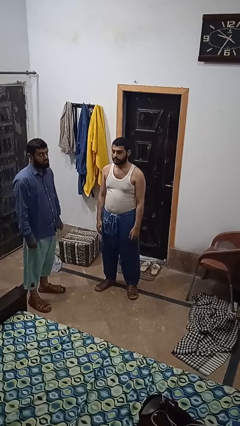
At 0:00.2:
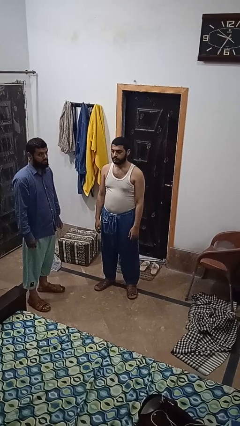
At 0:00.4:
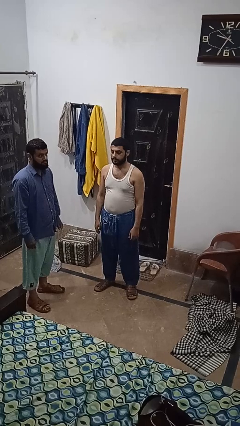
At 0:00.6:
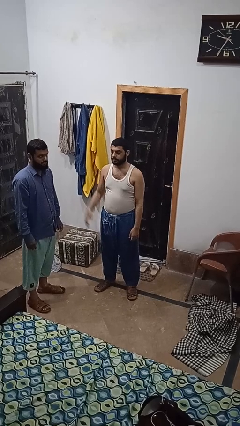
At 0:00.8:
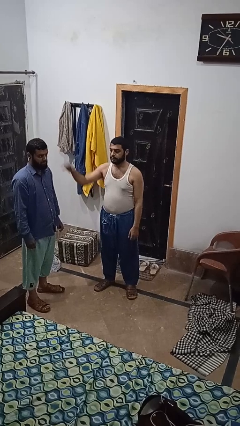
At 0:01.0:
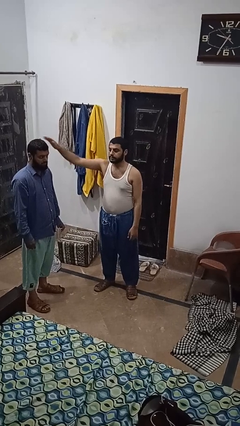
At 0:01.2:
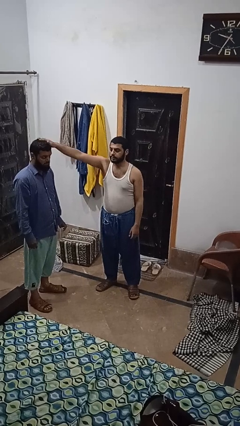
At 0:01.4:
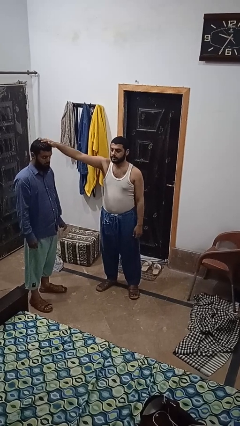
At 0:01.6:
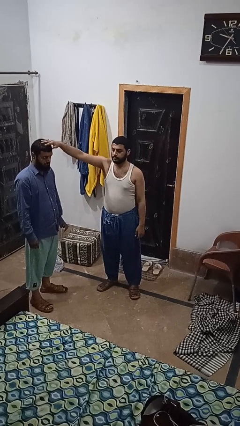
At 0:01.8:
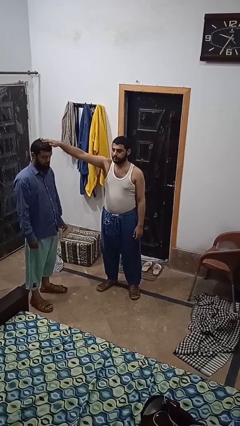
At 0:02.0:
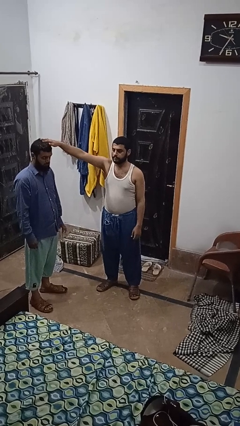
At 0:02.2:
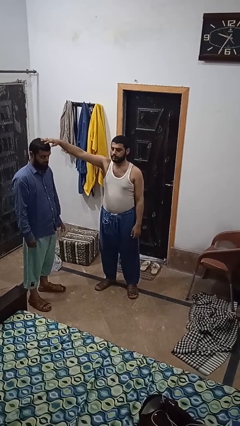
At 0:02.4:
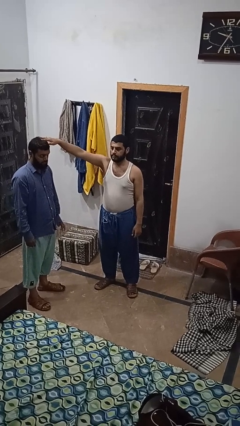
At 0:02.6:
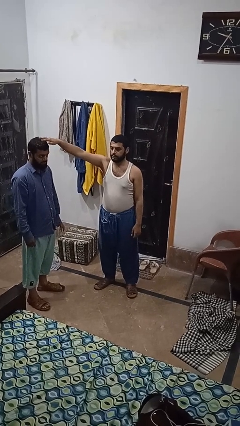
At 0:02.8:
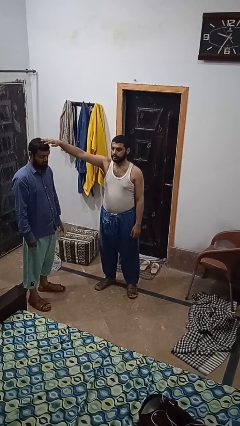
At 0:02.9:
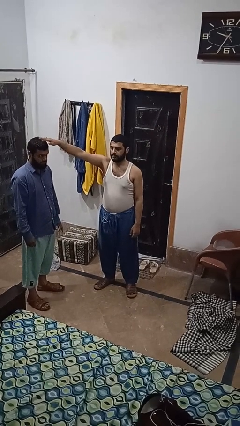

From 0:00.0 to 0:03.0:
person grabs person by hair

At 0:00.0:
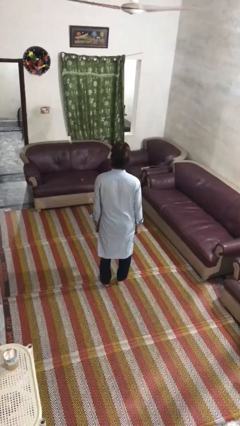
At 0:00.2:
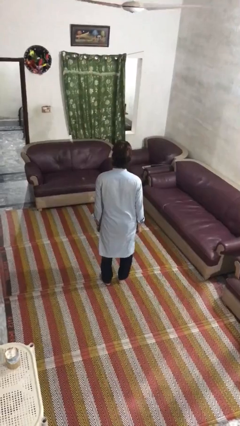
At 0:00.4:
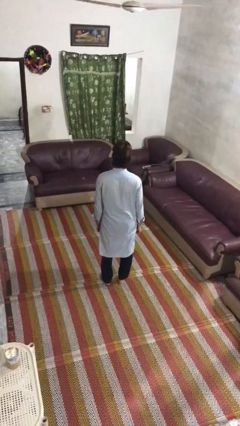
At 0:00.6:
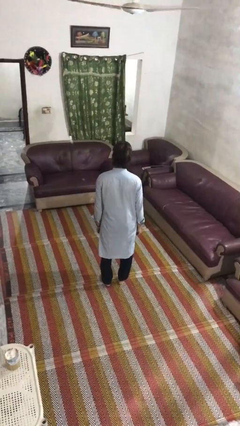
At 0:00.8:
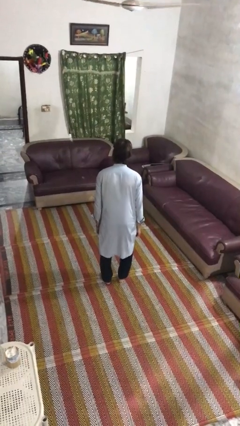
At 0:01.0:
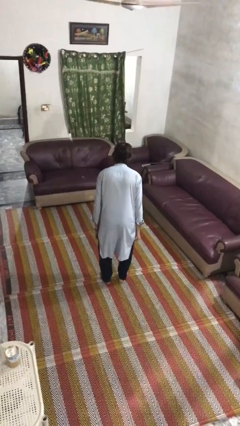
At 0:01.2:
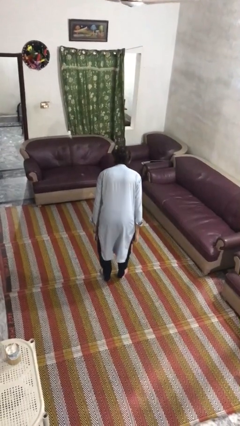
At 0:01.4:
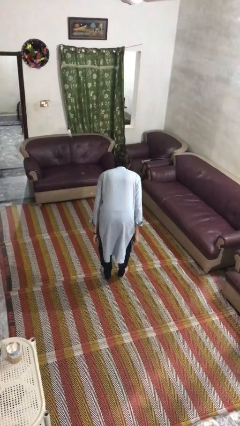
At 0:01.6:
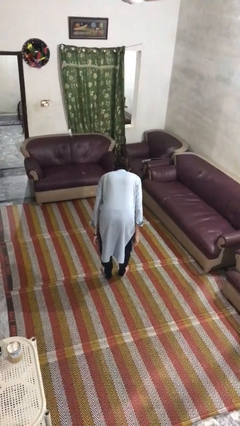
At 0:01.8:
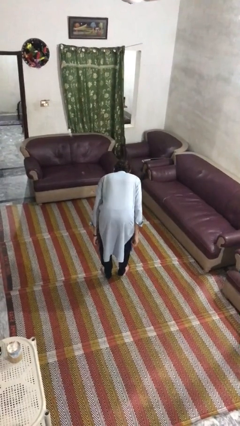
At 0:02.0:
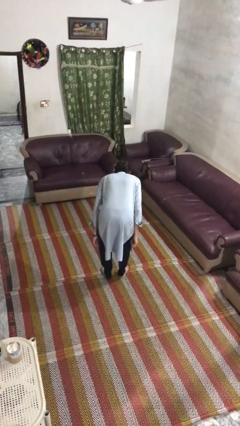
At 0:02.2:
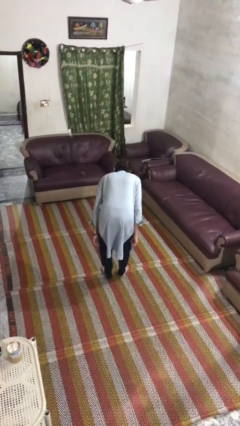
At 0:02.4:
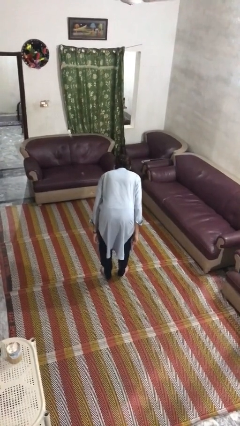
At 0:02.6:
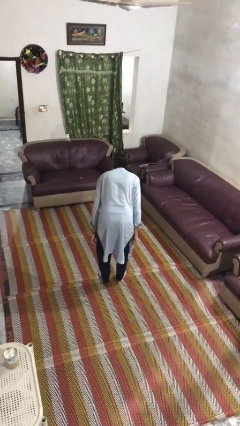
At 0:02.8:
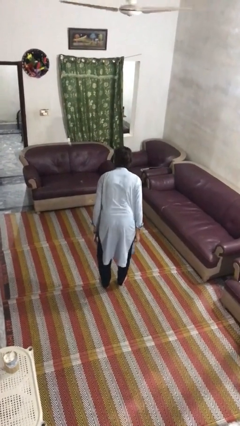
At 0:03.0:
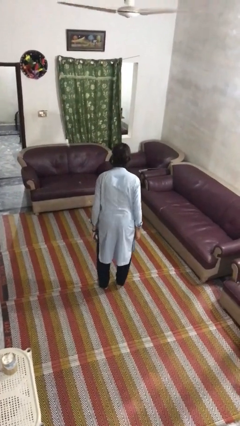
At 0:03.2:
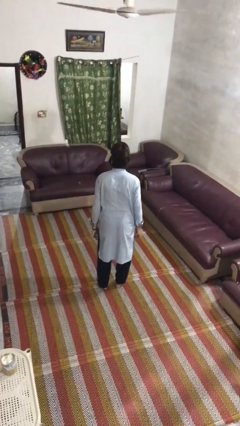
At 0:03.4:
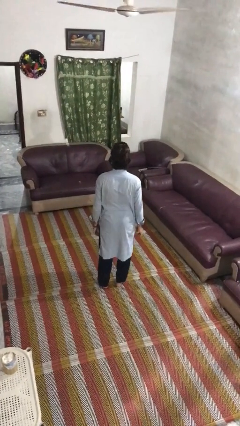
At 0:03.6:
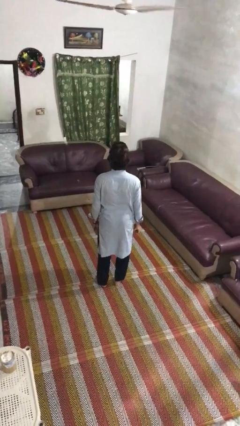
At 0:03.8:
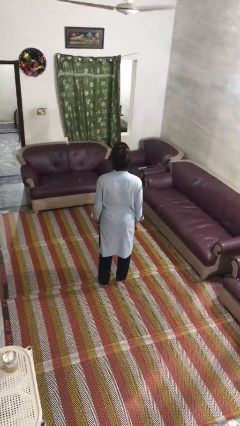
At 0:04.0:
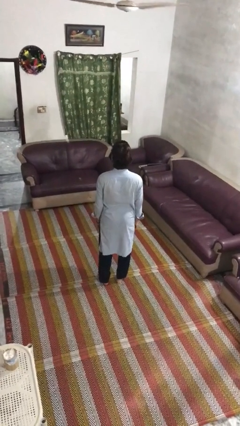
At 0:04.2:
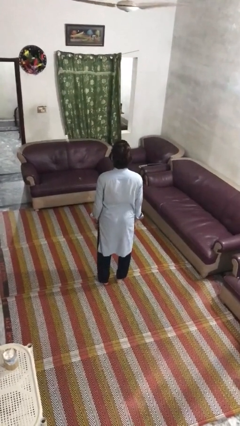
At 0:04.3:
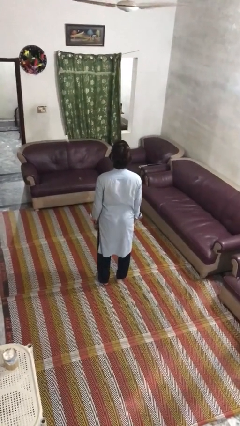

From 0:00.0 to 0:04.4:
person bows

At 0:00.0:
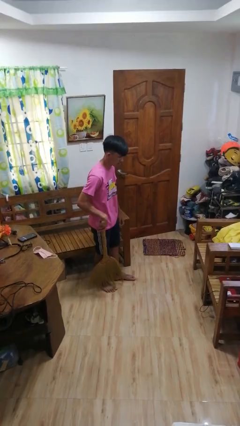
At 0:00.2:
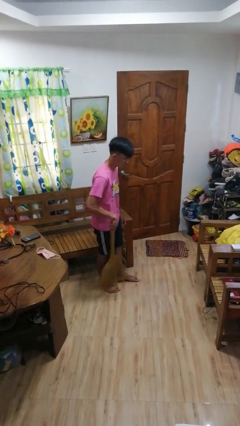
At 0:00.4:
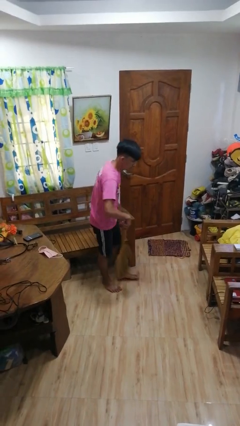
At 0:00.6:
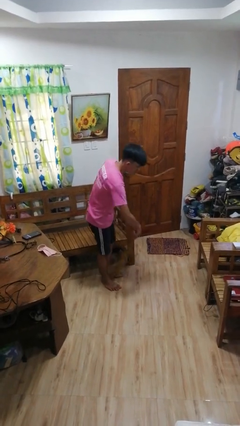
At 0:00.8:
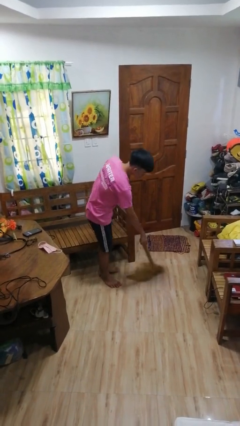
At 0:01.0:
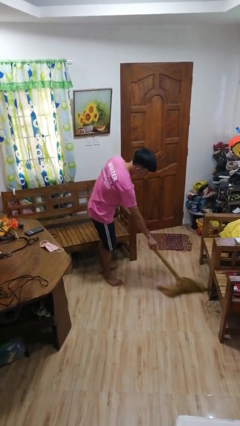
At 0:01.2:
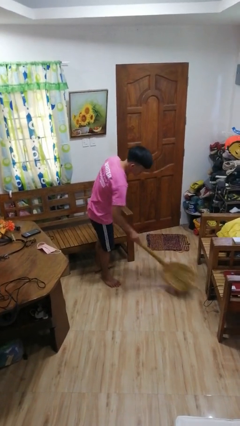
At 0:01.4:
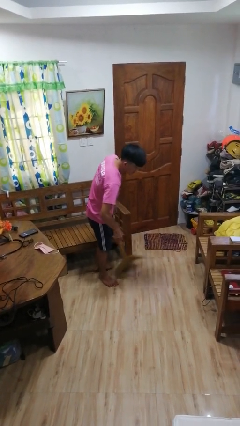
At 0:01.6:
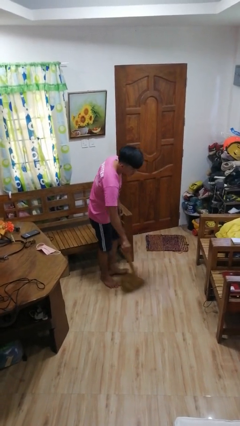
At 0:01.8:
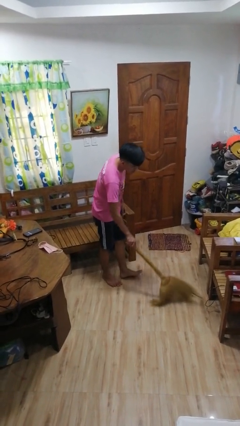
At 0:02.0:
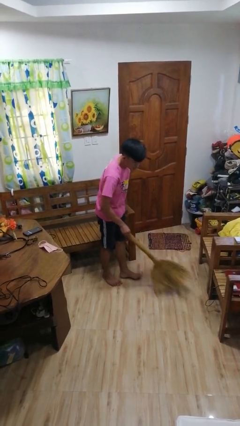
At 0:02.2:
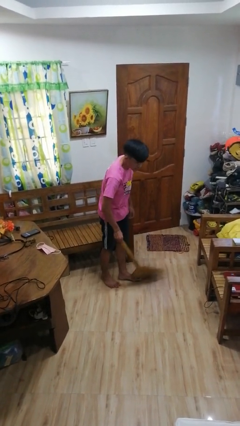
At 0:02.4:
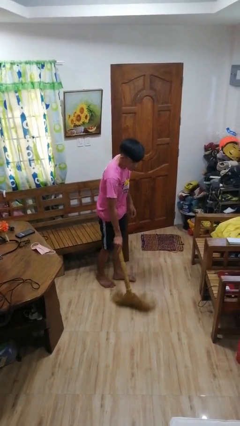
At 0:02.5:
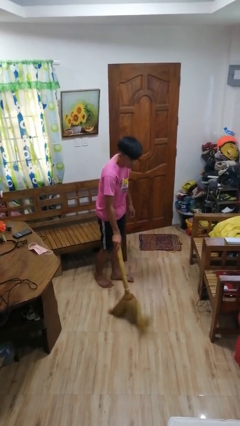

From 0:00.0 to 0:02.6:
person sweeps floor

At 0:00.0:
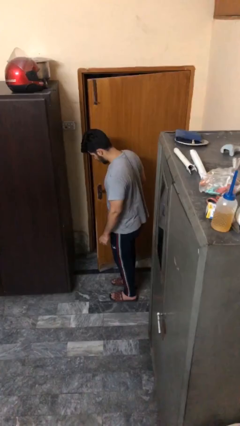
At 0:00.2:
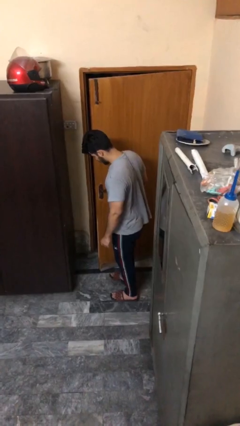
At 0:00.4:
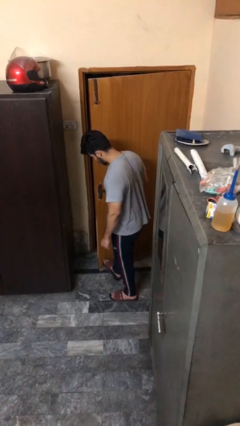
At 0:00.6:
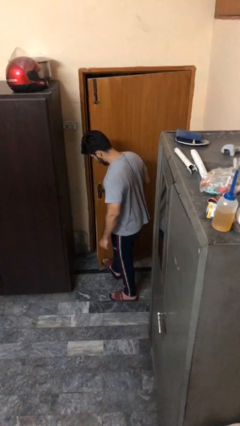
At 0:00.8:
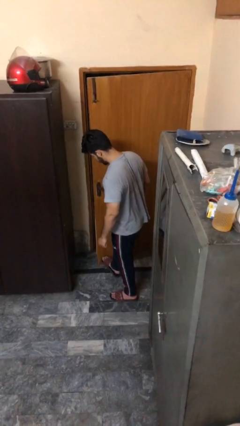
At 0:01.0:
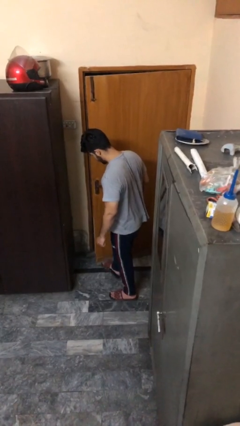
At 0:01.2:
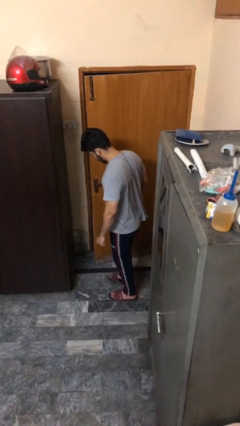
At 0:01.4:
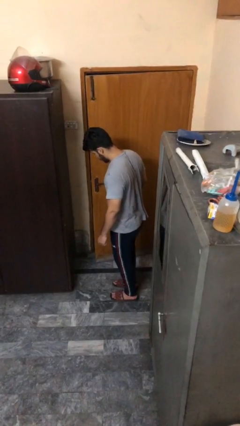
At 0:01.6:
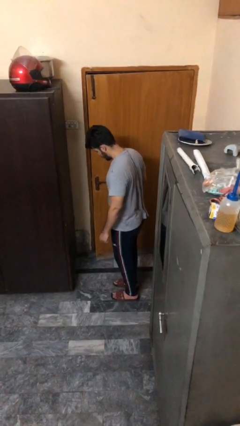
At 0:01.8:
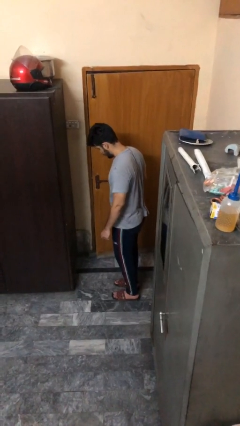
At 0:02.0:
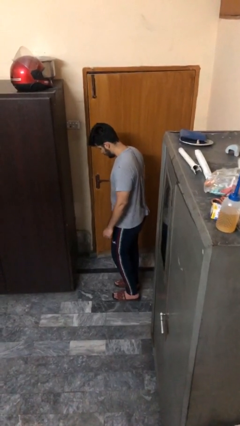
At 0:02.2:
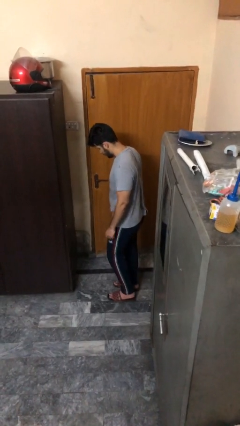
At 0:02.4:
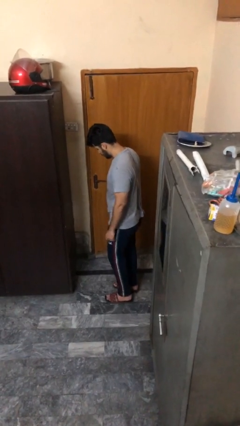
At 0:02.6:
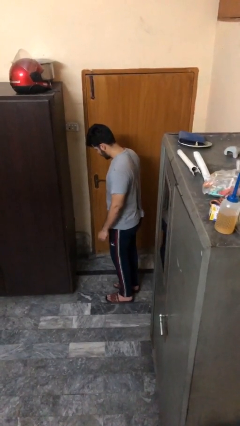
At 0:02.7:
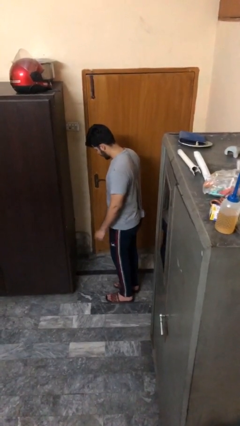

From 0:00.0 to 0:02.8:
person closes door with foot

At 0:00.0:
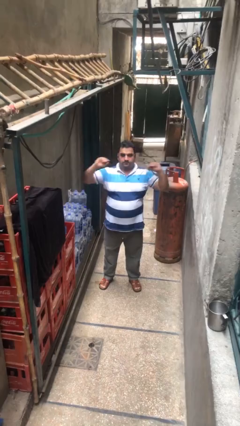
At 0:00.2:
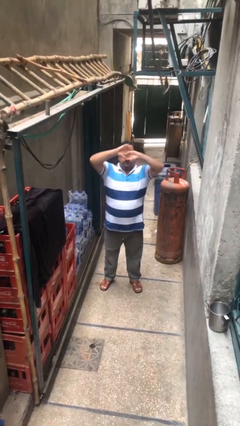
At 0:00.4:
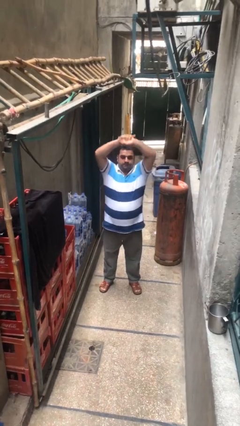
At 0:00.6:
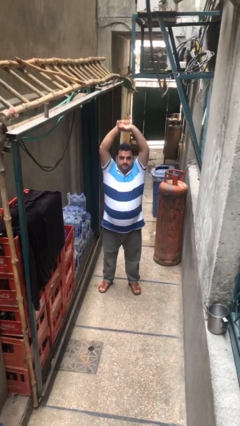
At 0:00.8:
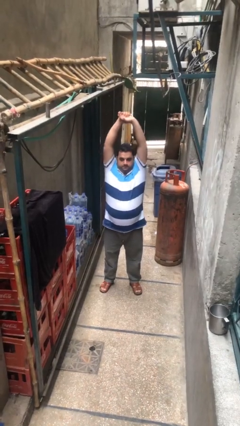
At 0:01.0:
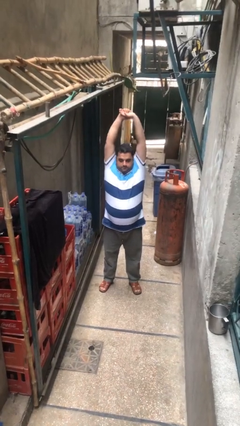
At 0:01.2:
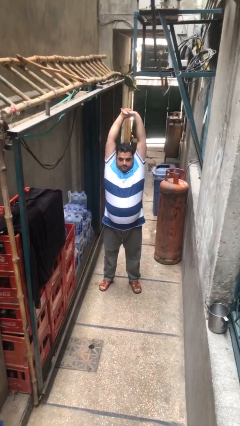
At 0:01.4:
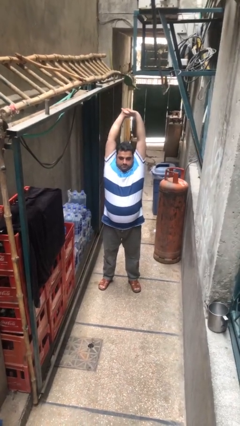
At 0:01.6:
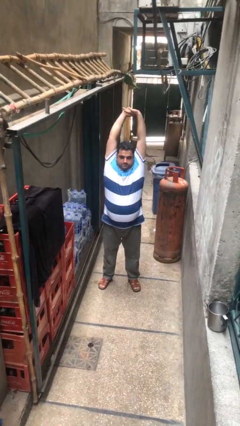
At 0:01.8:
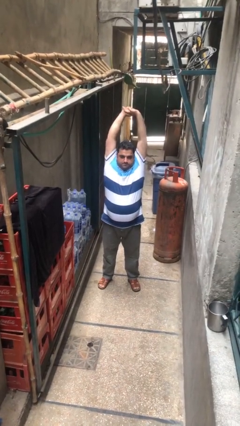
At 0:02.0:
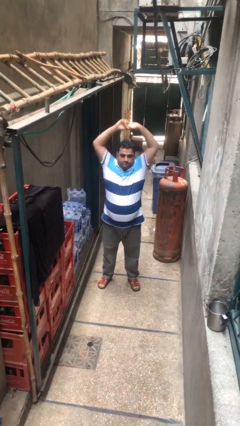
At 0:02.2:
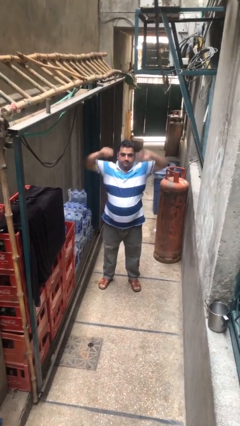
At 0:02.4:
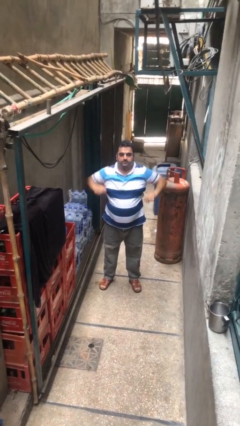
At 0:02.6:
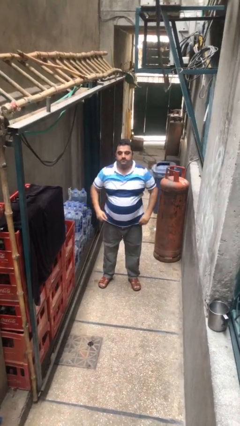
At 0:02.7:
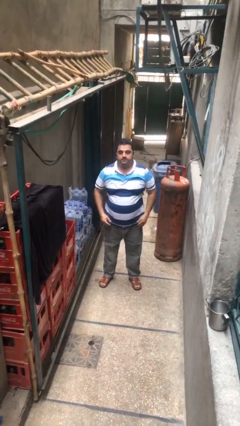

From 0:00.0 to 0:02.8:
person stretches arms over head

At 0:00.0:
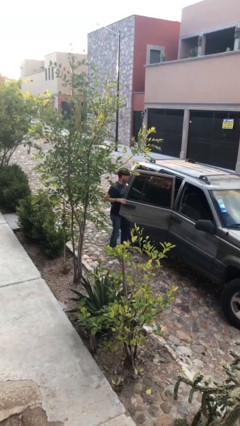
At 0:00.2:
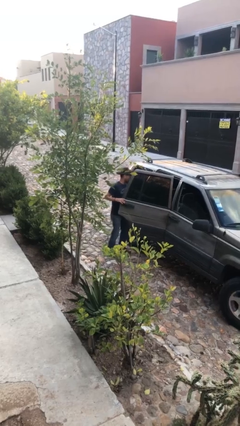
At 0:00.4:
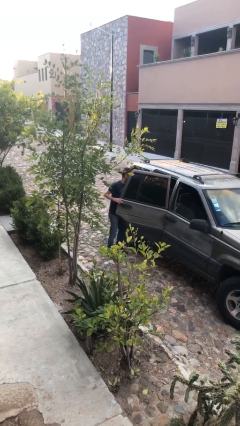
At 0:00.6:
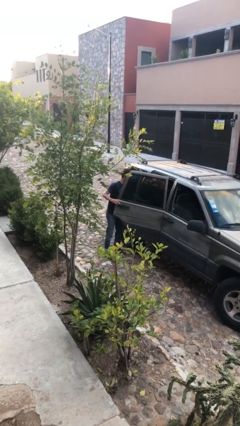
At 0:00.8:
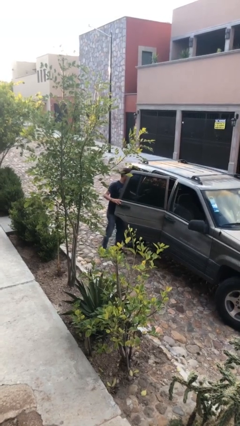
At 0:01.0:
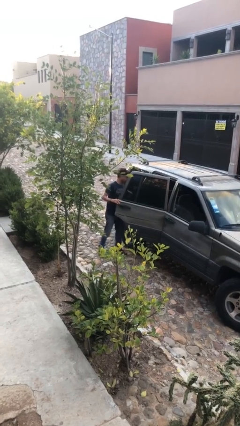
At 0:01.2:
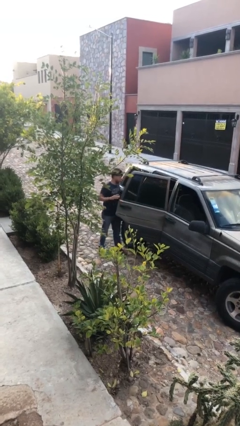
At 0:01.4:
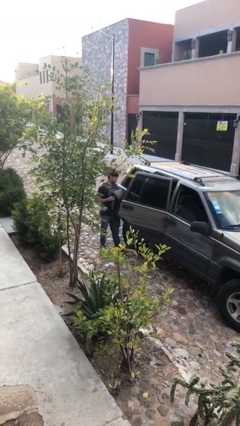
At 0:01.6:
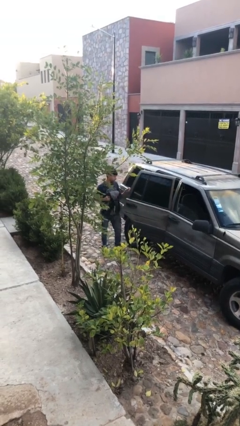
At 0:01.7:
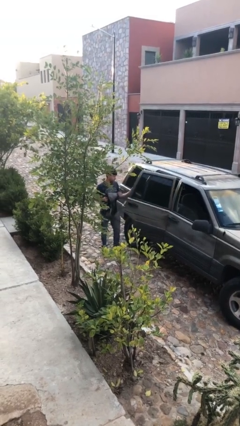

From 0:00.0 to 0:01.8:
person unloads car
